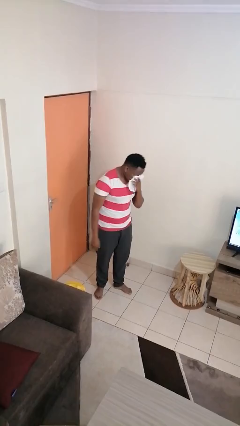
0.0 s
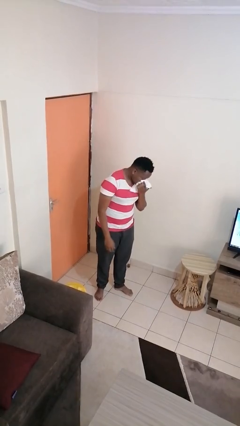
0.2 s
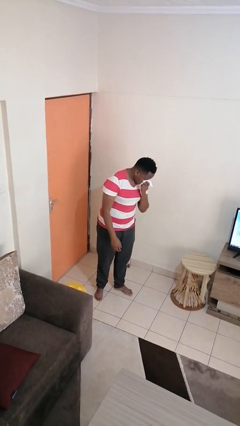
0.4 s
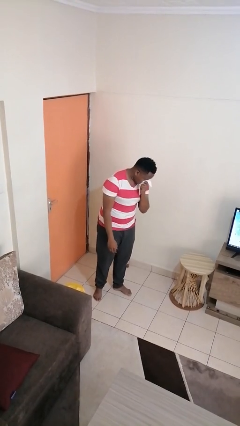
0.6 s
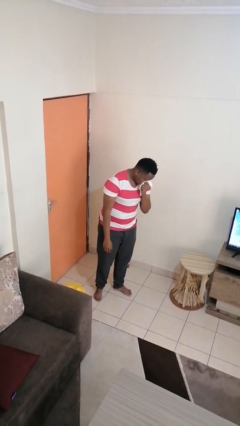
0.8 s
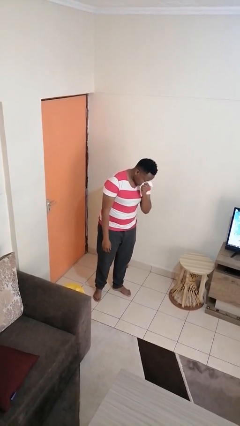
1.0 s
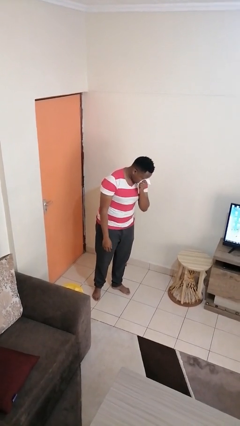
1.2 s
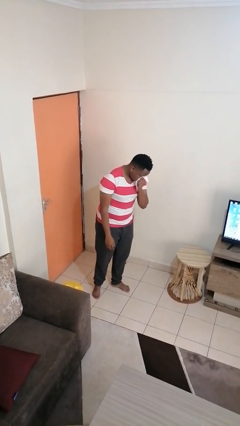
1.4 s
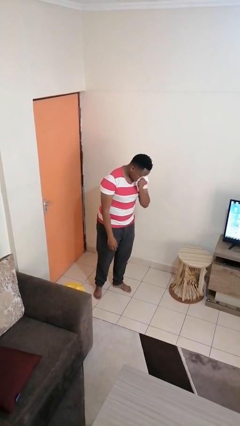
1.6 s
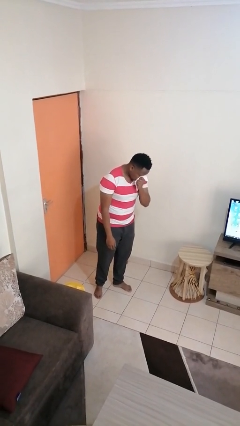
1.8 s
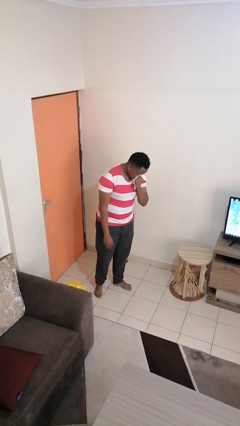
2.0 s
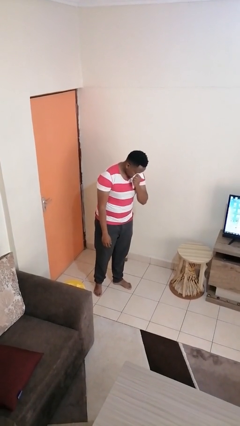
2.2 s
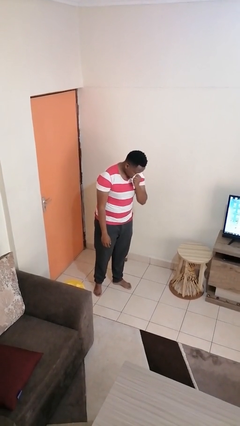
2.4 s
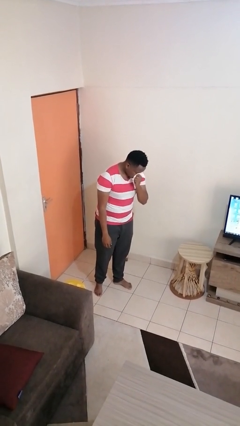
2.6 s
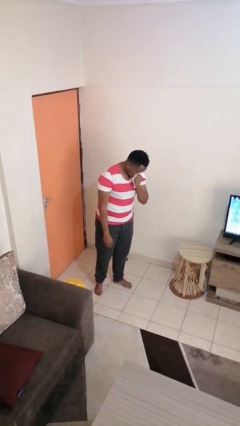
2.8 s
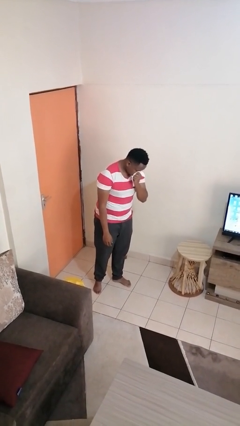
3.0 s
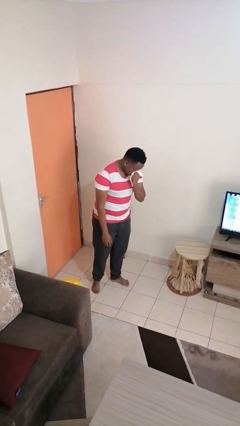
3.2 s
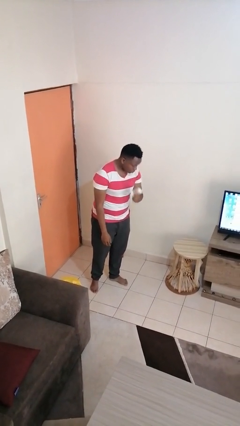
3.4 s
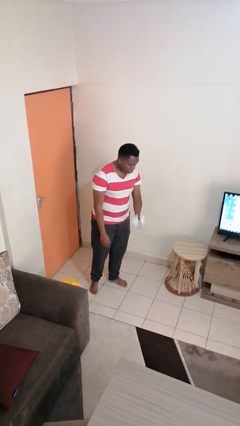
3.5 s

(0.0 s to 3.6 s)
person blows nose

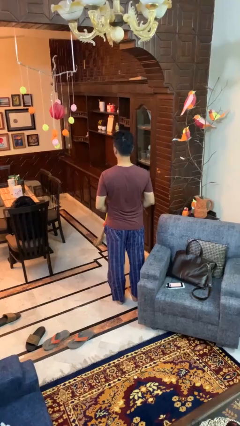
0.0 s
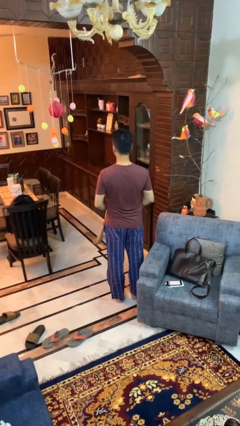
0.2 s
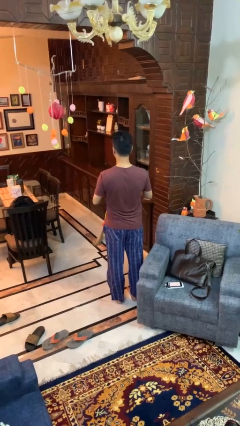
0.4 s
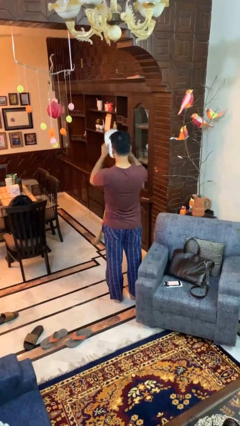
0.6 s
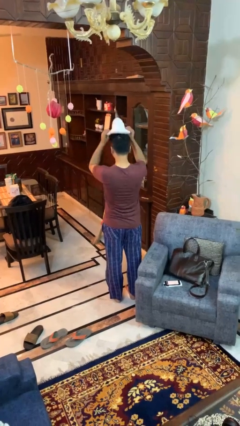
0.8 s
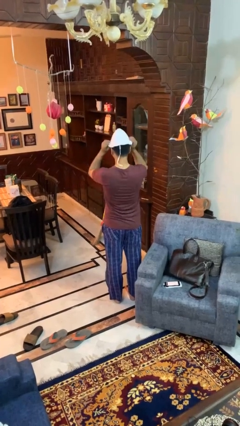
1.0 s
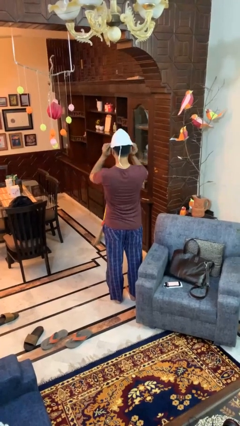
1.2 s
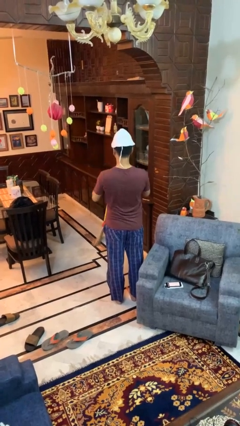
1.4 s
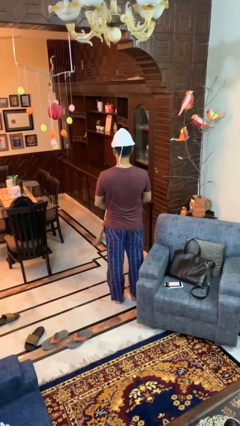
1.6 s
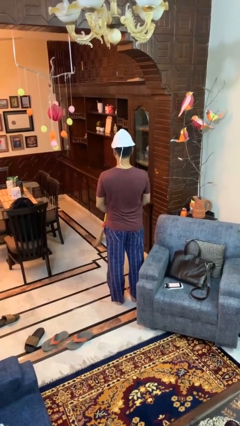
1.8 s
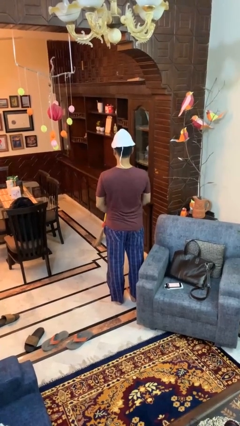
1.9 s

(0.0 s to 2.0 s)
person puts on hat

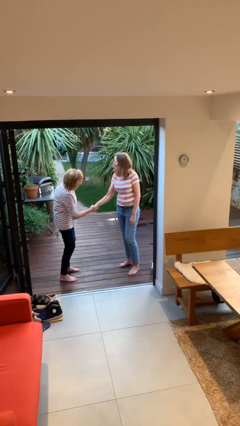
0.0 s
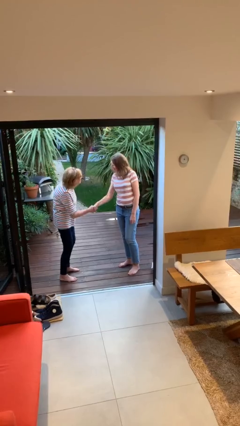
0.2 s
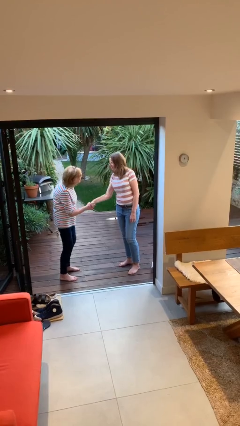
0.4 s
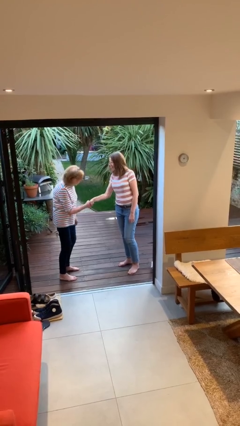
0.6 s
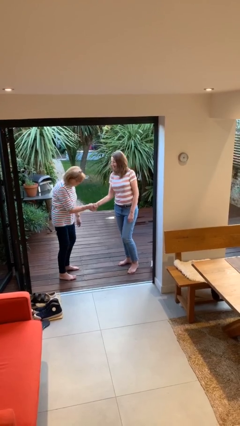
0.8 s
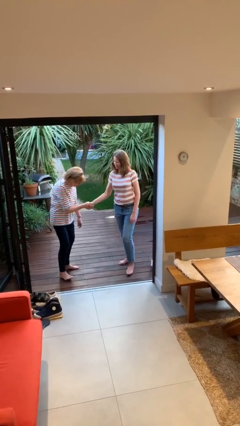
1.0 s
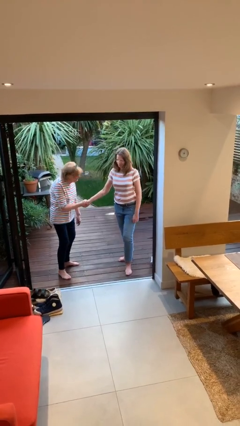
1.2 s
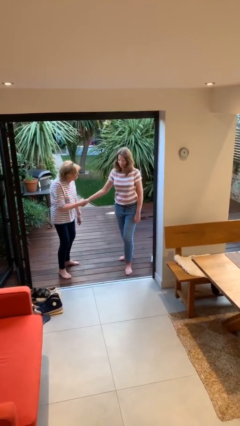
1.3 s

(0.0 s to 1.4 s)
person shakes hand

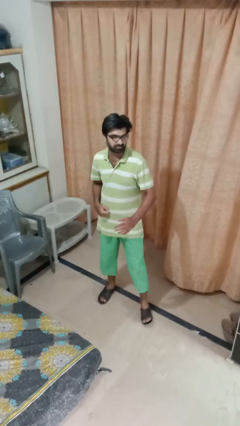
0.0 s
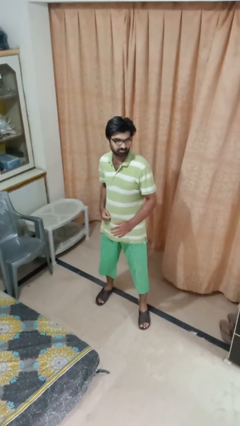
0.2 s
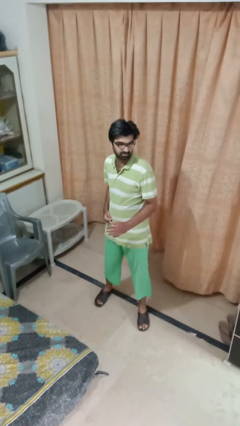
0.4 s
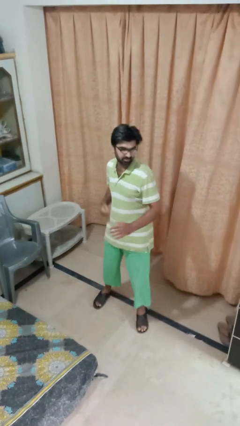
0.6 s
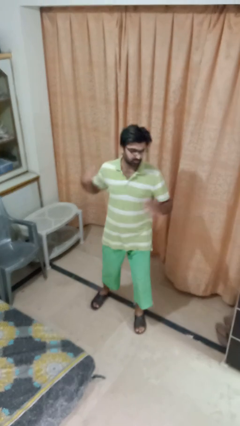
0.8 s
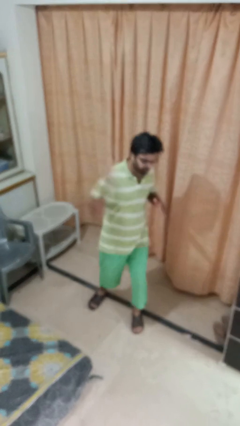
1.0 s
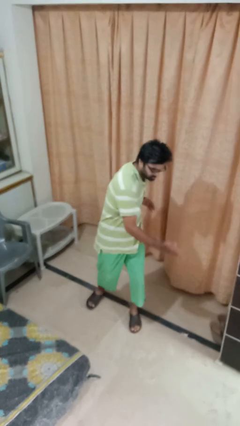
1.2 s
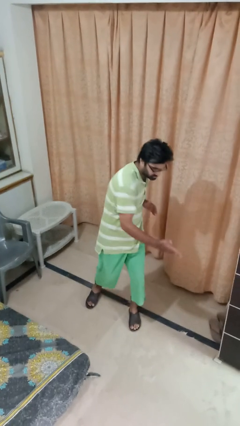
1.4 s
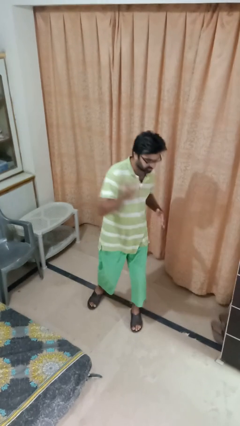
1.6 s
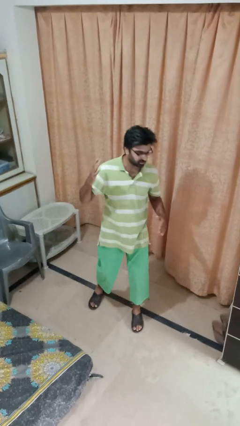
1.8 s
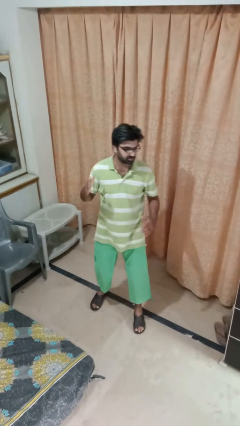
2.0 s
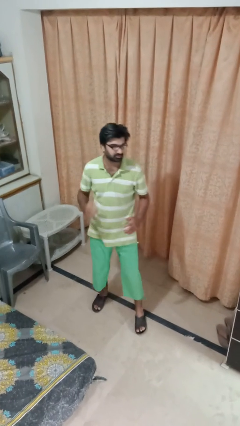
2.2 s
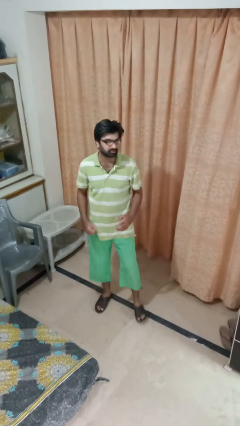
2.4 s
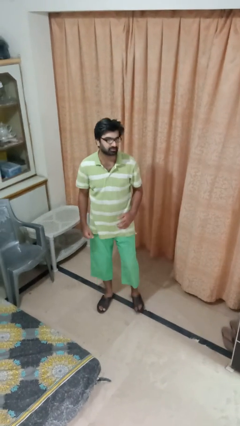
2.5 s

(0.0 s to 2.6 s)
person karate chop

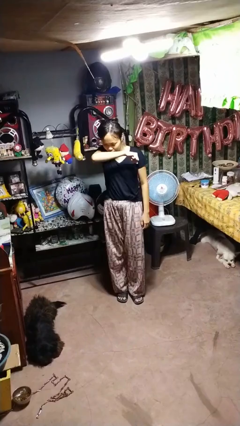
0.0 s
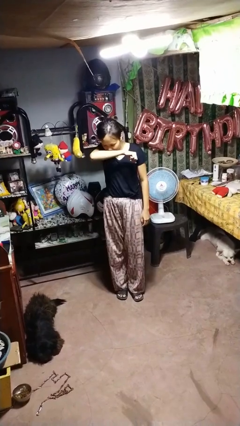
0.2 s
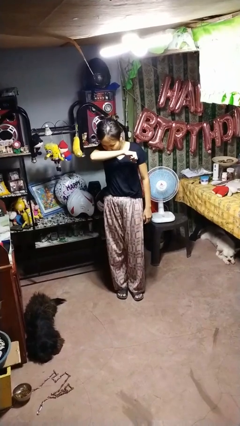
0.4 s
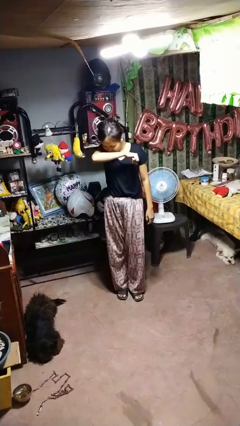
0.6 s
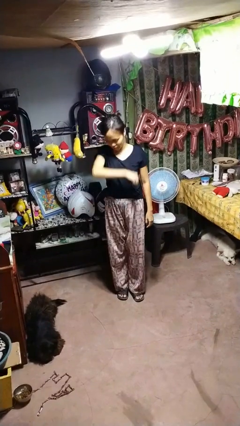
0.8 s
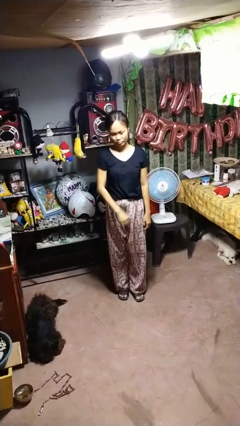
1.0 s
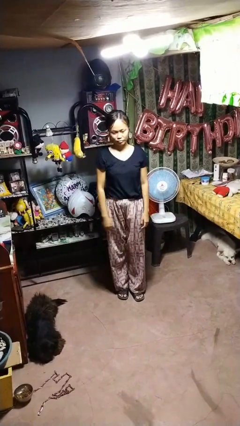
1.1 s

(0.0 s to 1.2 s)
person sneezes into arm

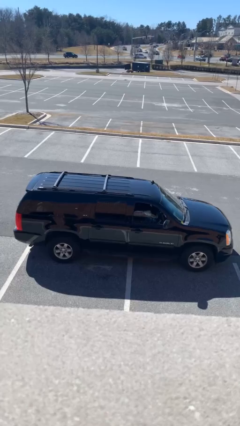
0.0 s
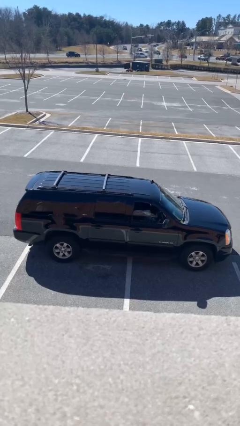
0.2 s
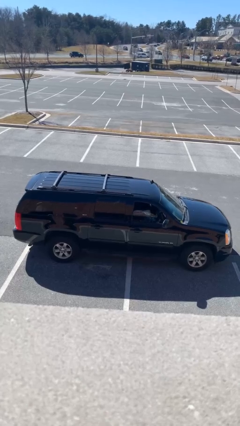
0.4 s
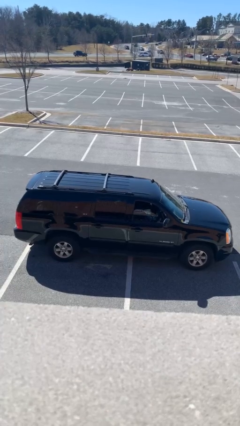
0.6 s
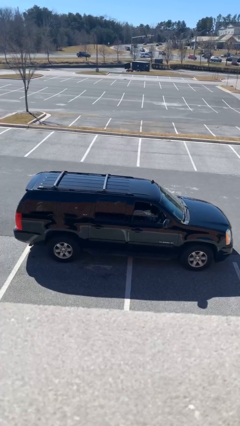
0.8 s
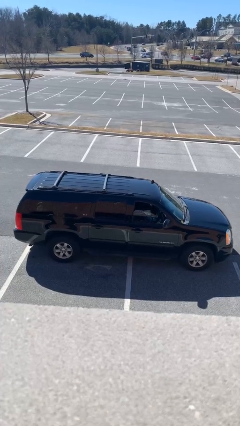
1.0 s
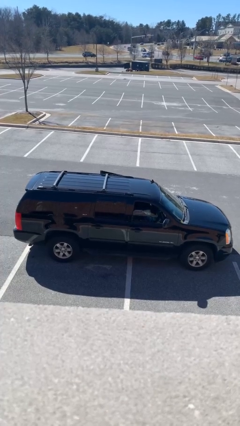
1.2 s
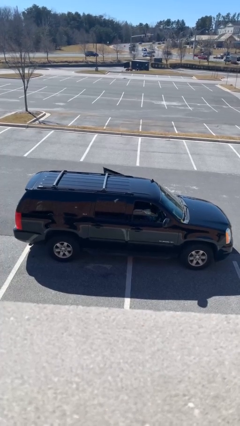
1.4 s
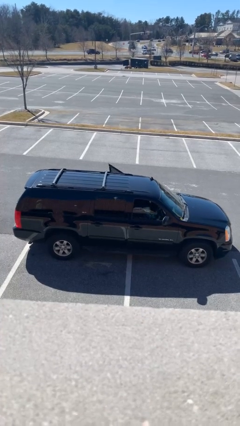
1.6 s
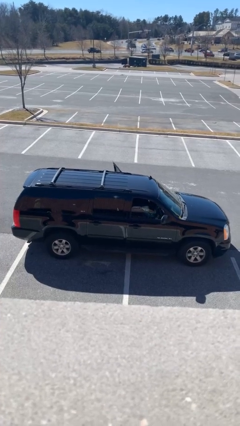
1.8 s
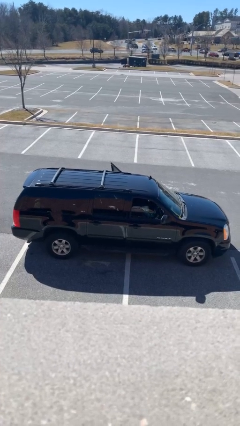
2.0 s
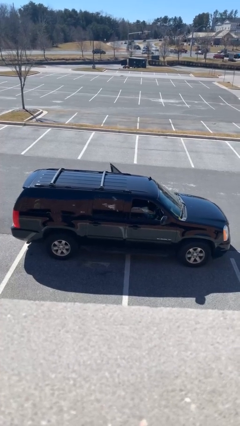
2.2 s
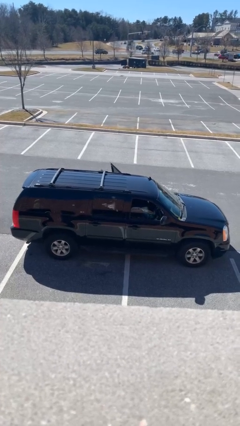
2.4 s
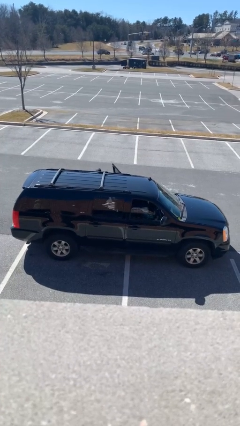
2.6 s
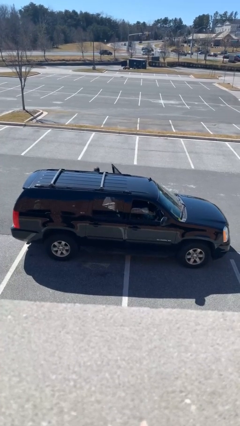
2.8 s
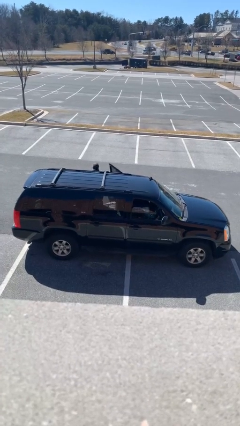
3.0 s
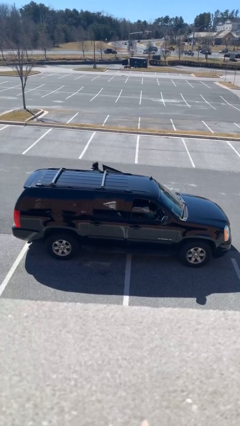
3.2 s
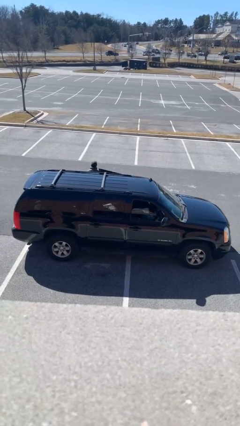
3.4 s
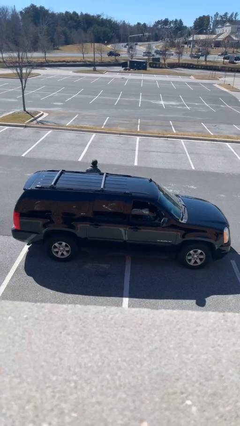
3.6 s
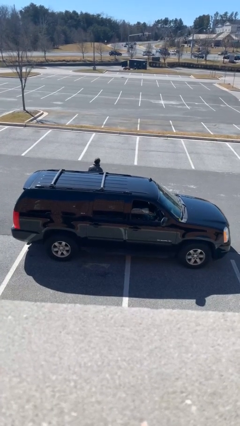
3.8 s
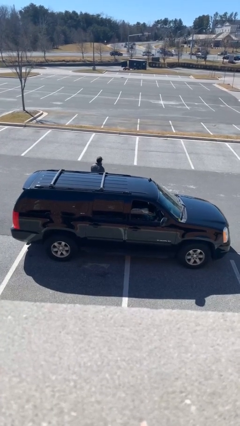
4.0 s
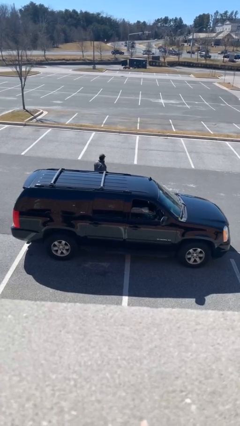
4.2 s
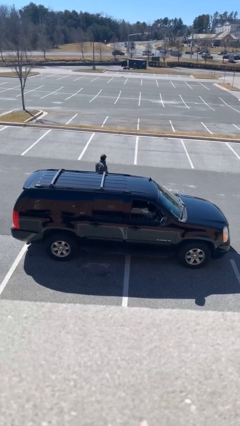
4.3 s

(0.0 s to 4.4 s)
car drops off person

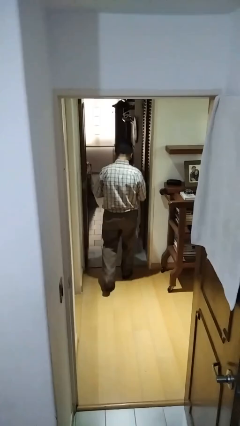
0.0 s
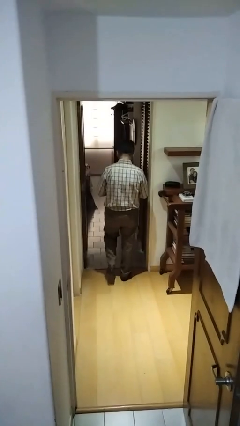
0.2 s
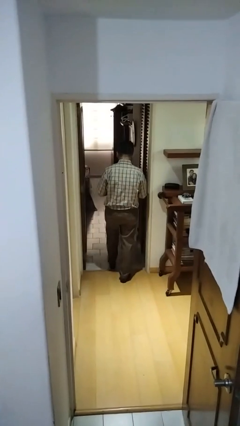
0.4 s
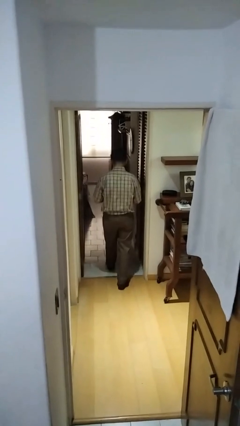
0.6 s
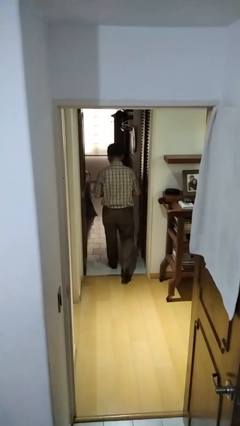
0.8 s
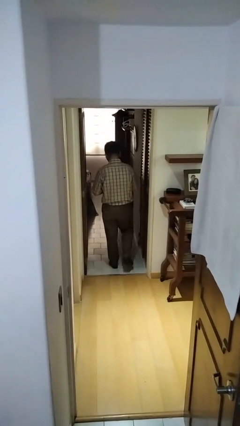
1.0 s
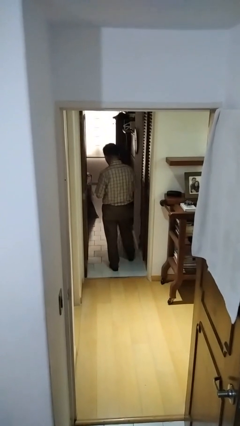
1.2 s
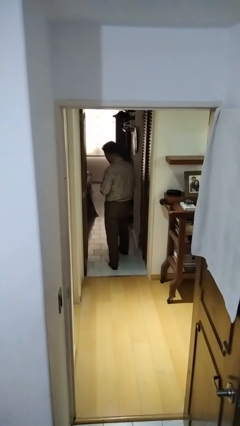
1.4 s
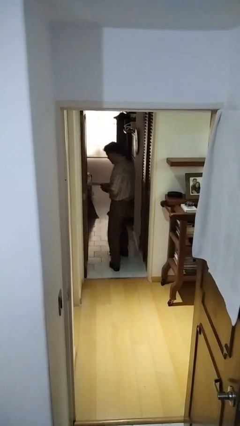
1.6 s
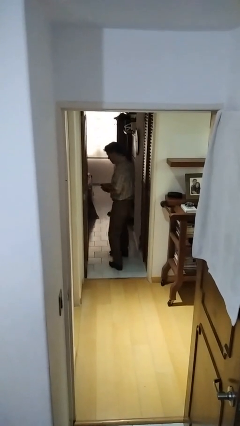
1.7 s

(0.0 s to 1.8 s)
person exits scene through structure
